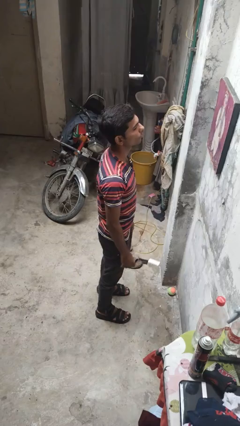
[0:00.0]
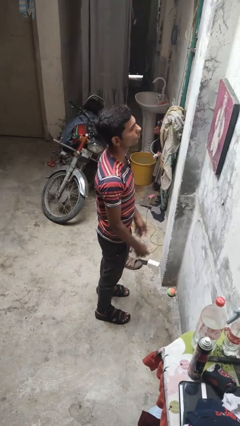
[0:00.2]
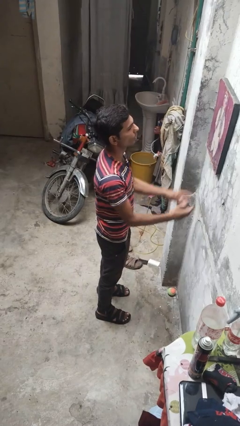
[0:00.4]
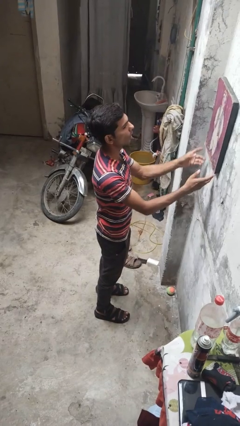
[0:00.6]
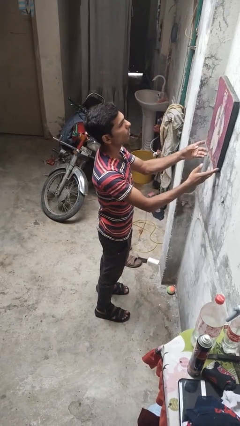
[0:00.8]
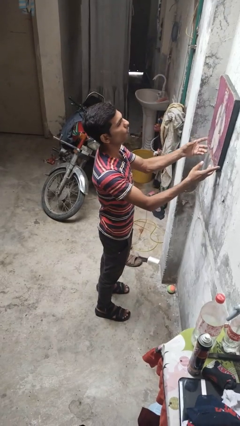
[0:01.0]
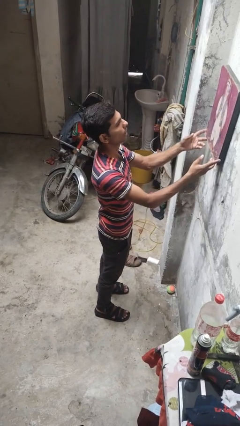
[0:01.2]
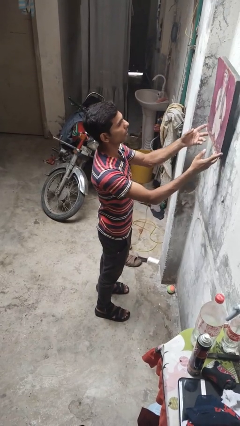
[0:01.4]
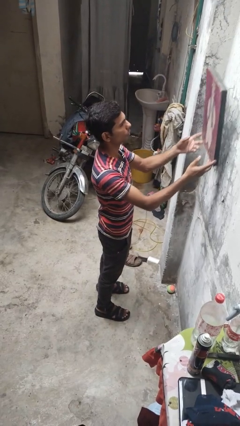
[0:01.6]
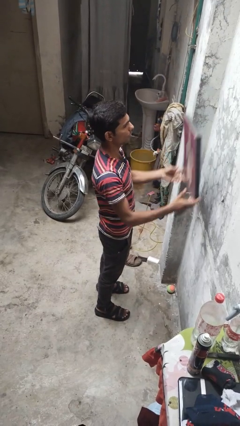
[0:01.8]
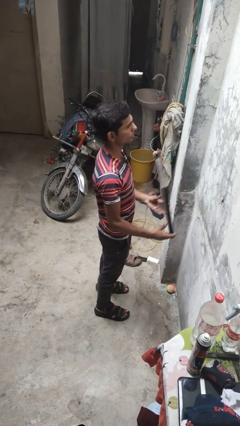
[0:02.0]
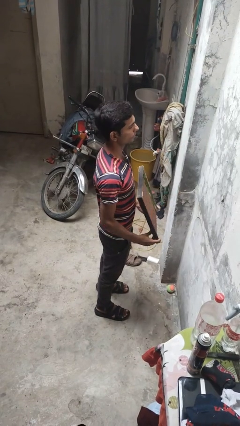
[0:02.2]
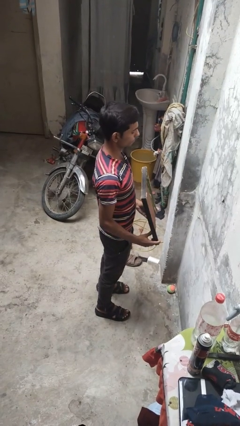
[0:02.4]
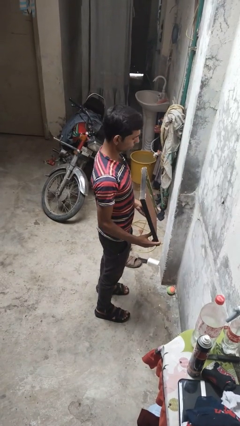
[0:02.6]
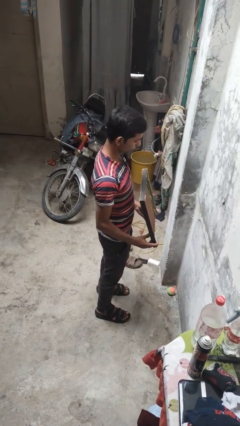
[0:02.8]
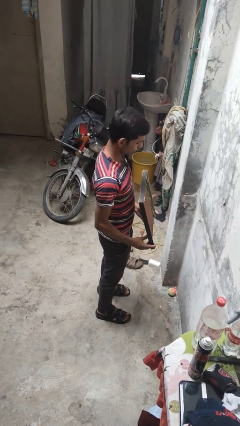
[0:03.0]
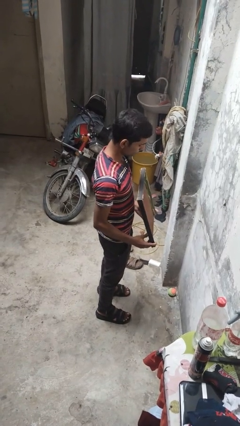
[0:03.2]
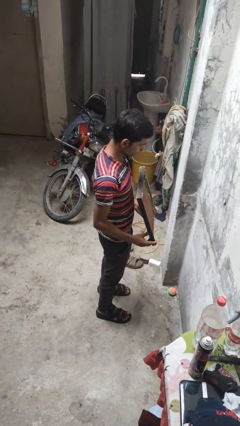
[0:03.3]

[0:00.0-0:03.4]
person takes down picture frame

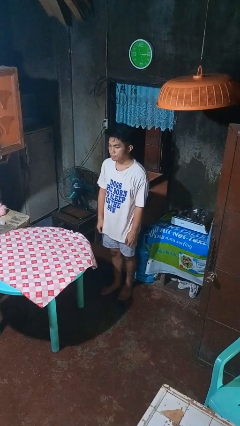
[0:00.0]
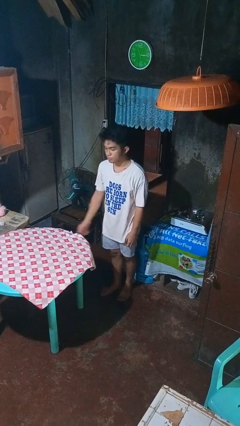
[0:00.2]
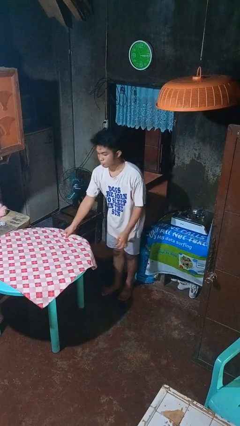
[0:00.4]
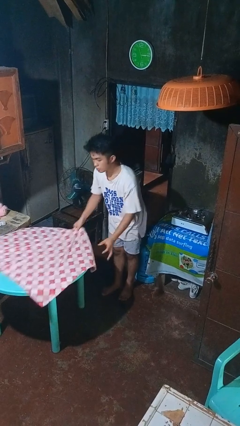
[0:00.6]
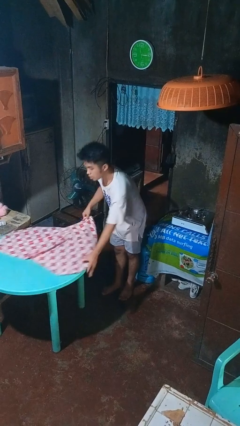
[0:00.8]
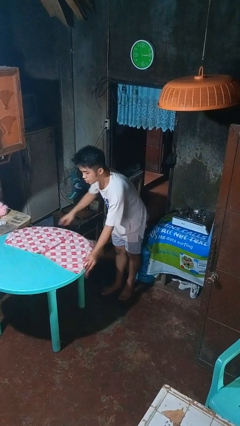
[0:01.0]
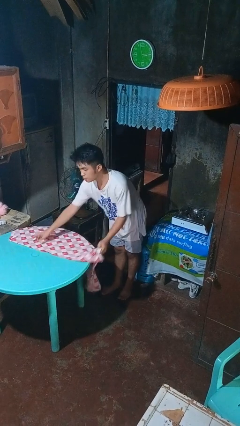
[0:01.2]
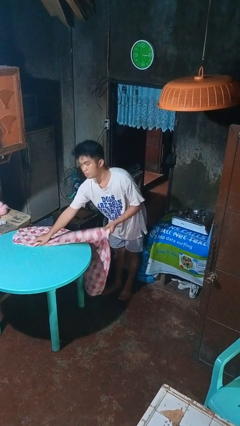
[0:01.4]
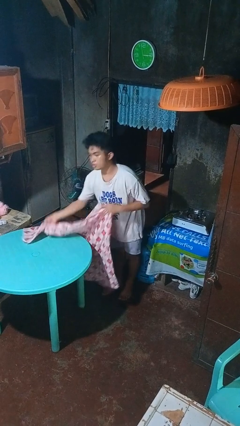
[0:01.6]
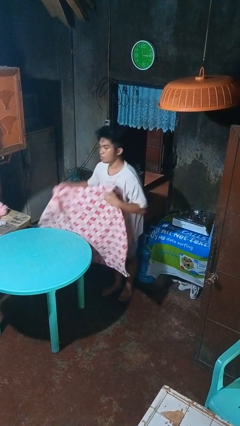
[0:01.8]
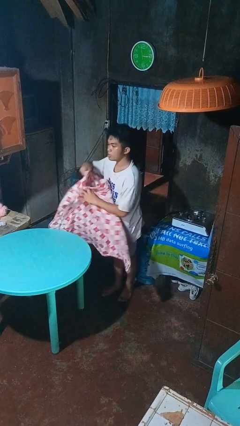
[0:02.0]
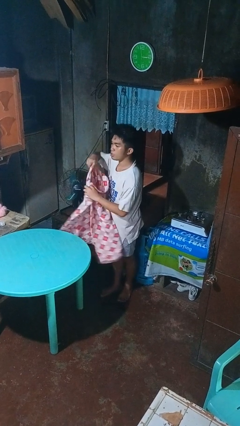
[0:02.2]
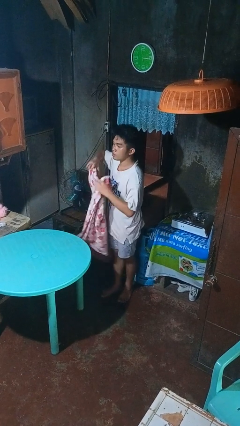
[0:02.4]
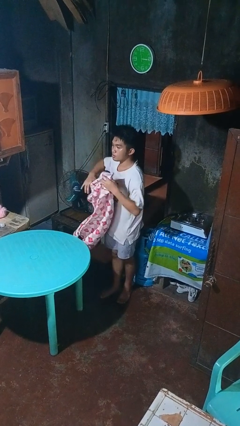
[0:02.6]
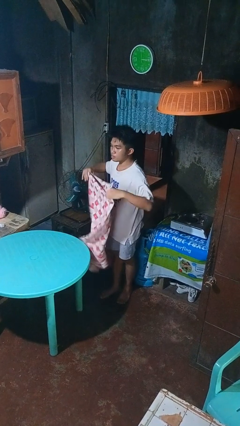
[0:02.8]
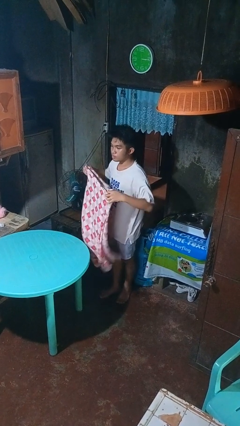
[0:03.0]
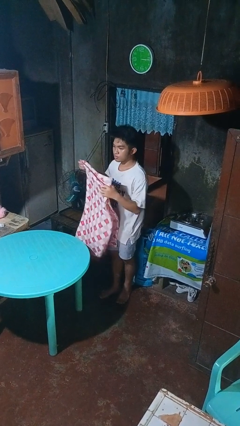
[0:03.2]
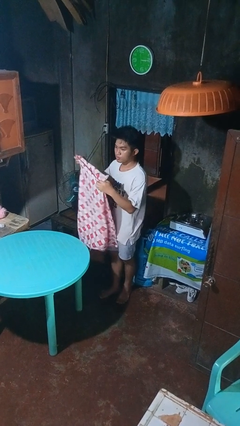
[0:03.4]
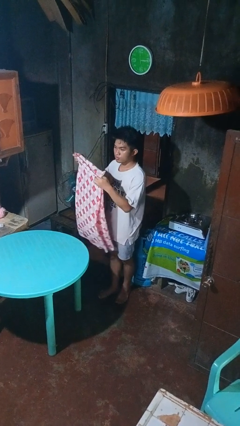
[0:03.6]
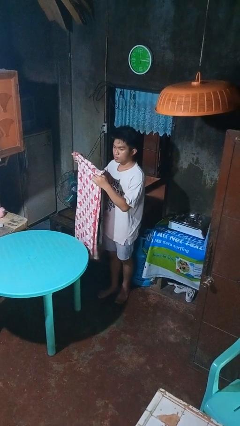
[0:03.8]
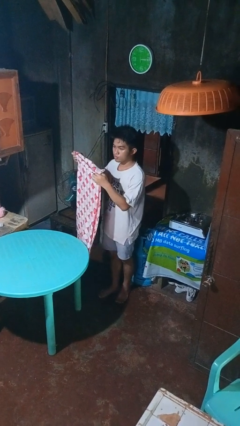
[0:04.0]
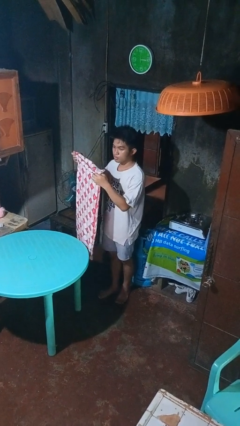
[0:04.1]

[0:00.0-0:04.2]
person folds tablecloth

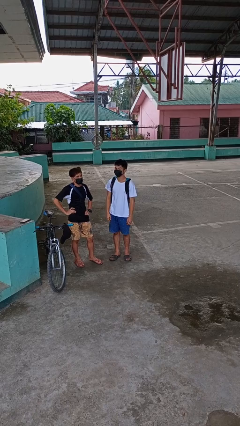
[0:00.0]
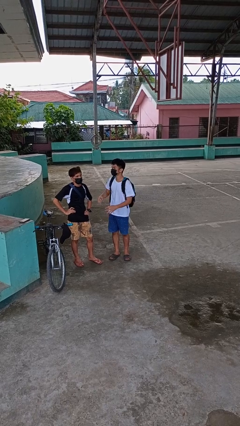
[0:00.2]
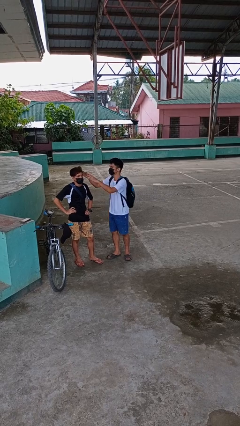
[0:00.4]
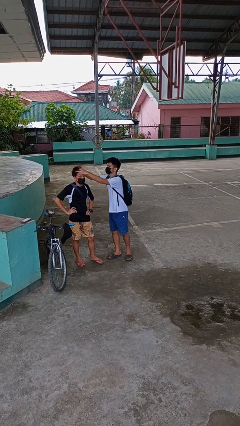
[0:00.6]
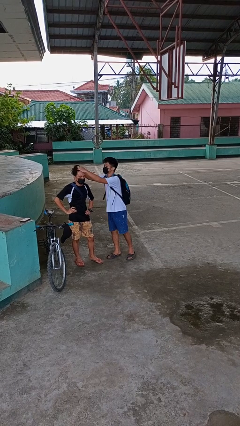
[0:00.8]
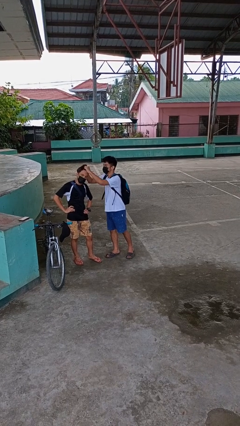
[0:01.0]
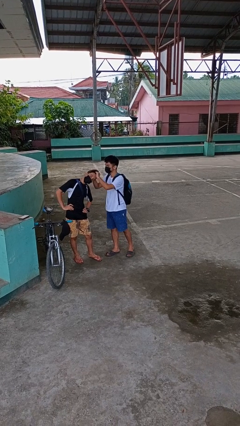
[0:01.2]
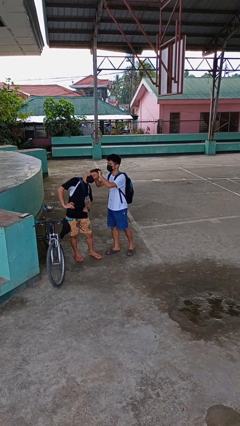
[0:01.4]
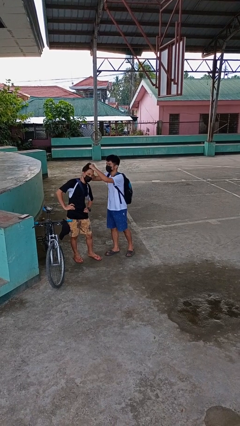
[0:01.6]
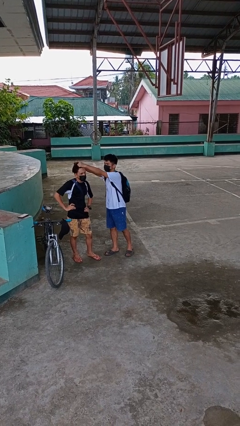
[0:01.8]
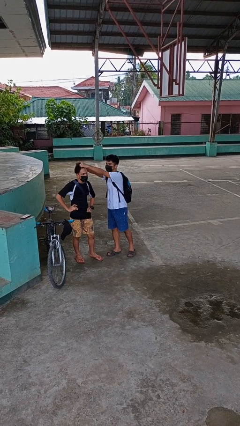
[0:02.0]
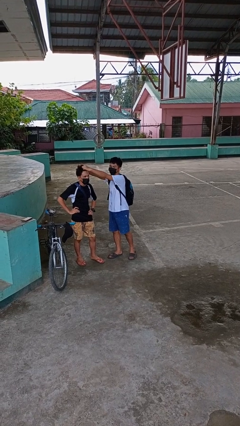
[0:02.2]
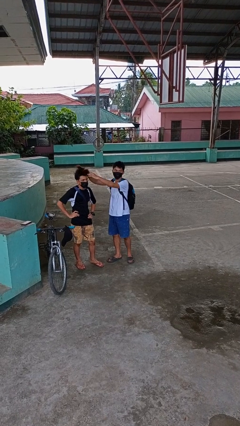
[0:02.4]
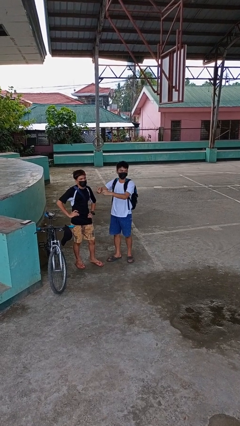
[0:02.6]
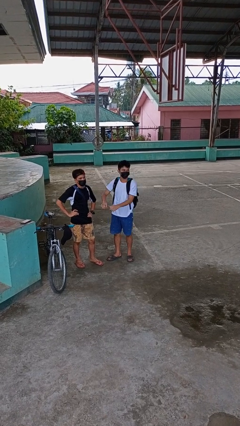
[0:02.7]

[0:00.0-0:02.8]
person grabs person by hair

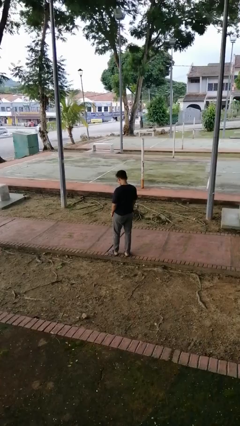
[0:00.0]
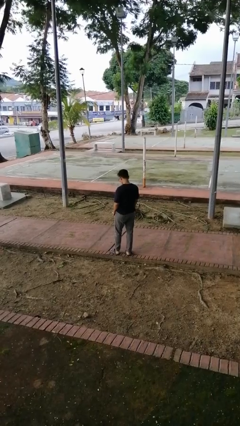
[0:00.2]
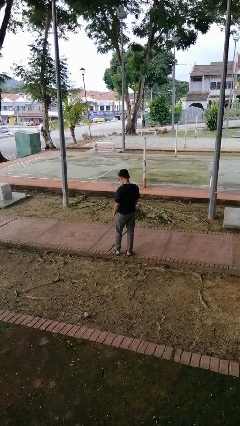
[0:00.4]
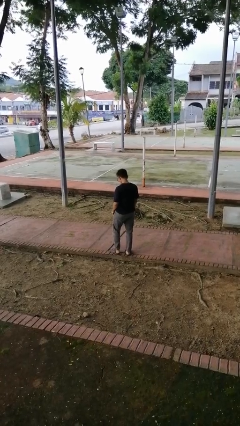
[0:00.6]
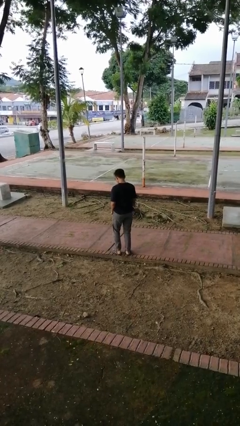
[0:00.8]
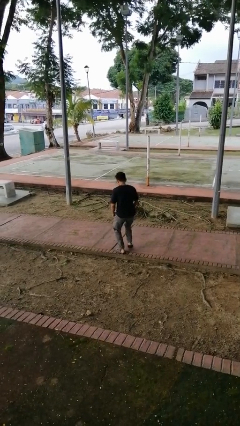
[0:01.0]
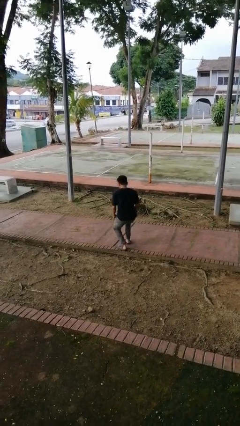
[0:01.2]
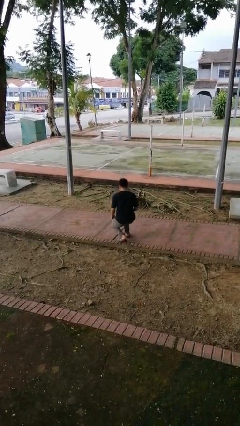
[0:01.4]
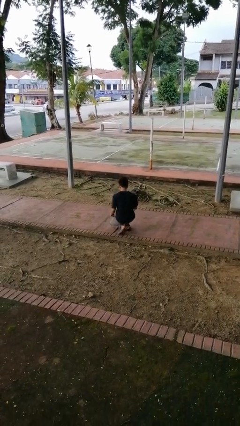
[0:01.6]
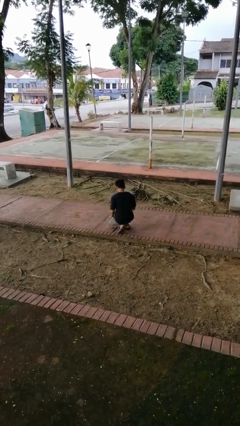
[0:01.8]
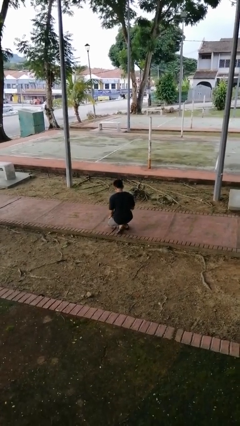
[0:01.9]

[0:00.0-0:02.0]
person kneels

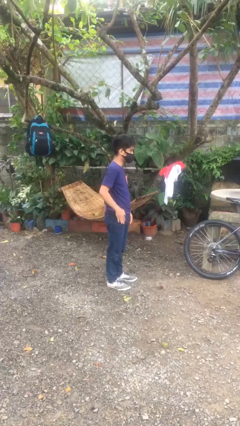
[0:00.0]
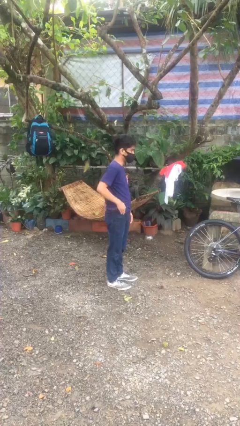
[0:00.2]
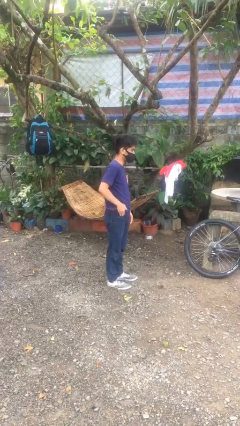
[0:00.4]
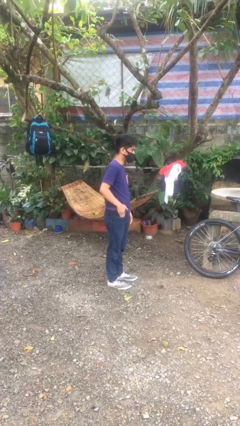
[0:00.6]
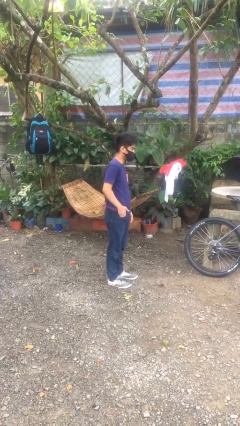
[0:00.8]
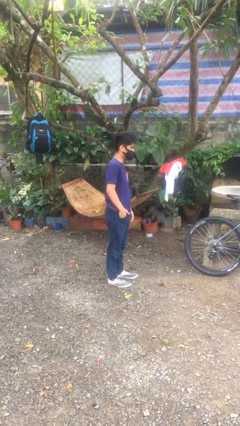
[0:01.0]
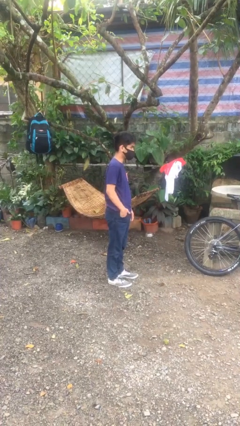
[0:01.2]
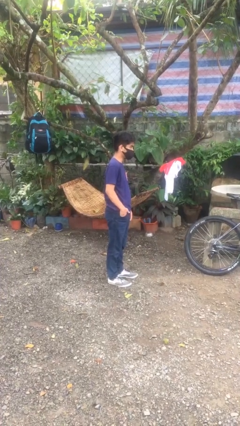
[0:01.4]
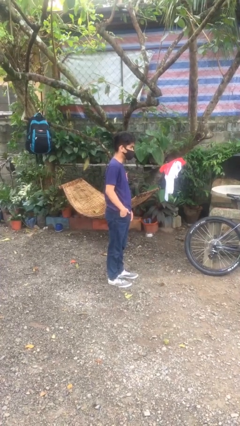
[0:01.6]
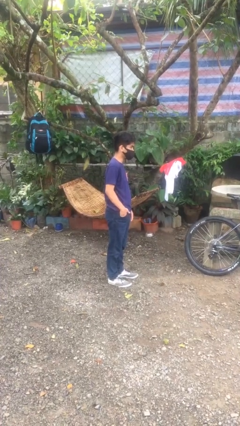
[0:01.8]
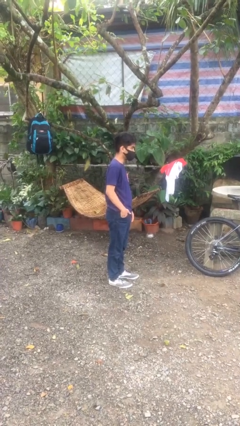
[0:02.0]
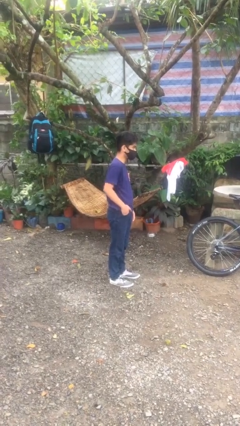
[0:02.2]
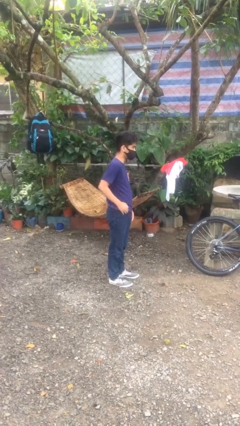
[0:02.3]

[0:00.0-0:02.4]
person puts hands in back pockets

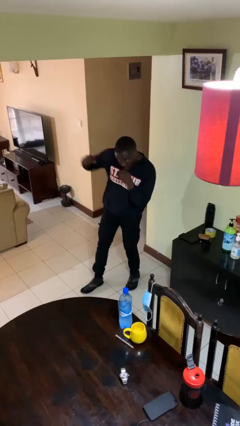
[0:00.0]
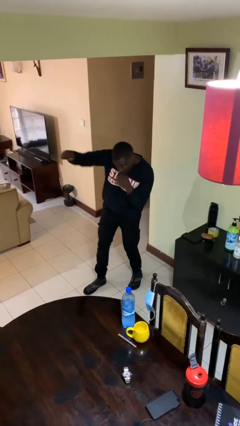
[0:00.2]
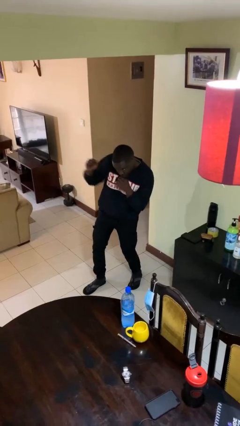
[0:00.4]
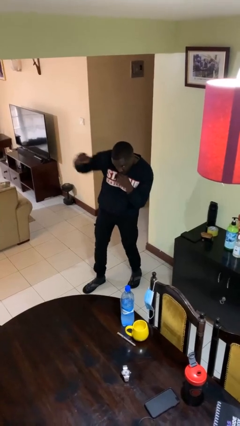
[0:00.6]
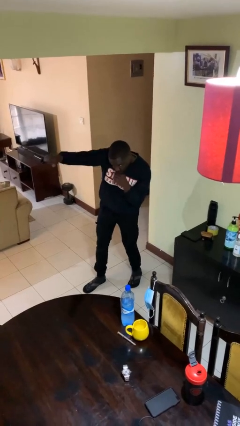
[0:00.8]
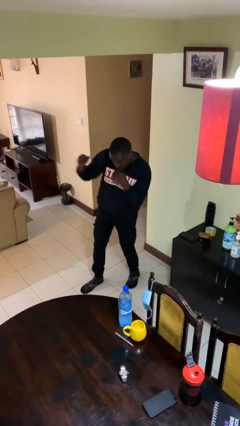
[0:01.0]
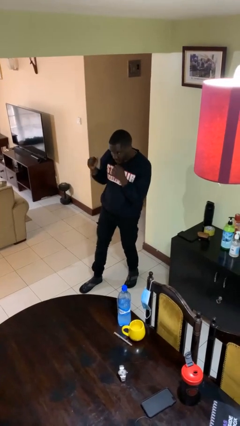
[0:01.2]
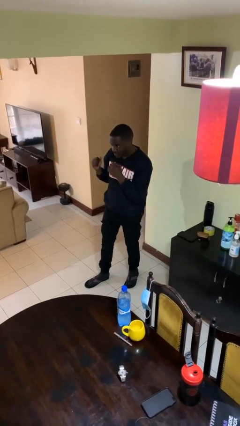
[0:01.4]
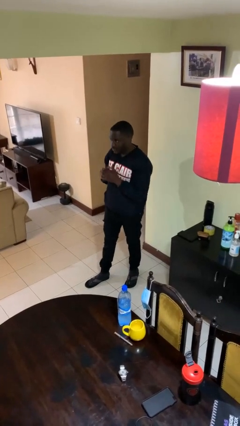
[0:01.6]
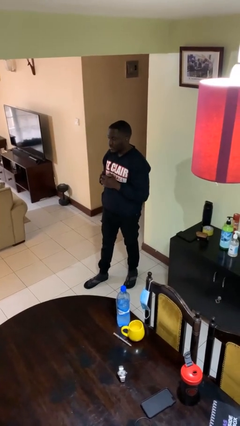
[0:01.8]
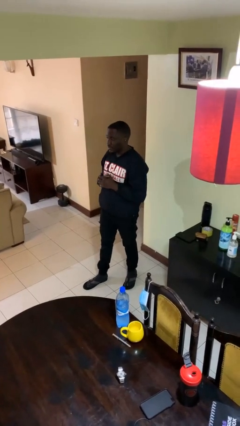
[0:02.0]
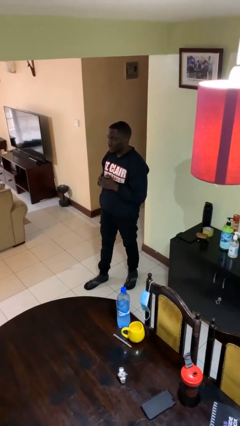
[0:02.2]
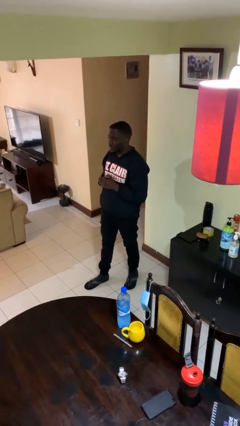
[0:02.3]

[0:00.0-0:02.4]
person punches

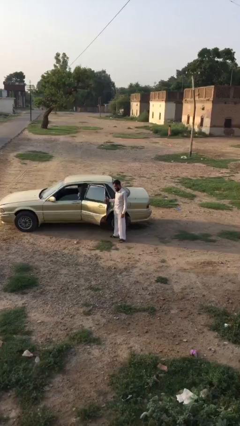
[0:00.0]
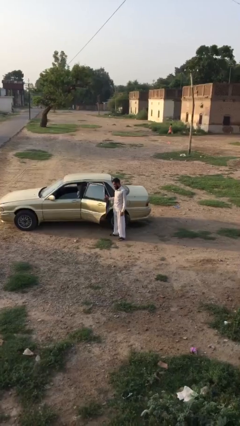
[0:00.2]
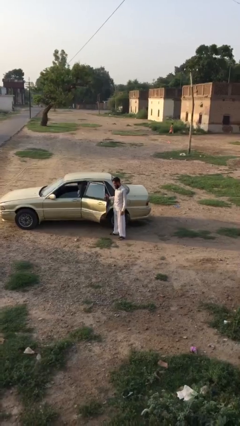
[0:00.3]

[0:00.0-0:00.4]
person closes car door
